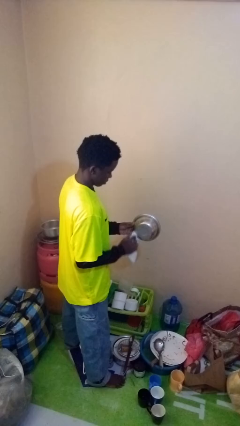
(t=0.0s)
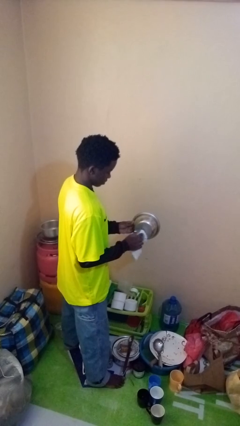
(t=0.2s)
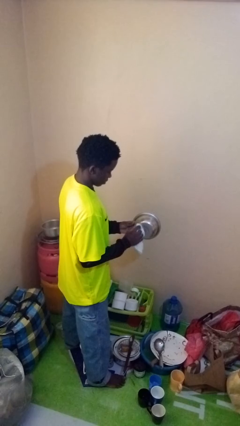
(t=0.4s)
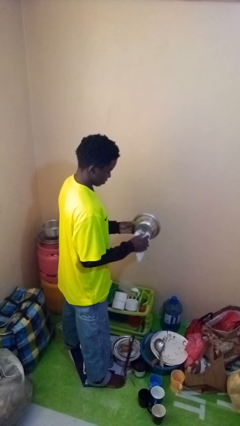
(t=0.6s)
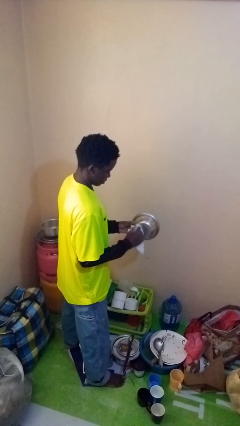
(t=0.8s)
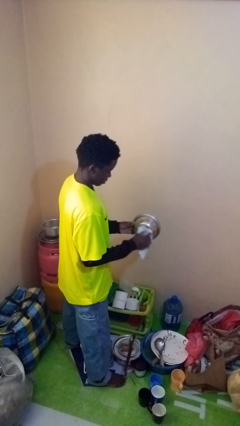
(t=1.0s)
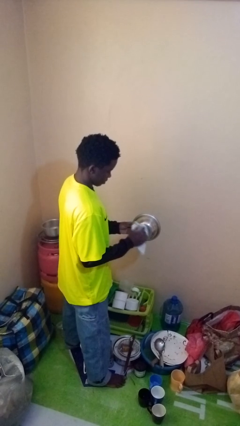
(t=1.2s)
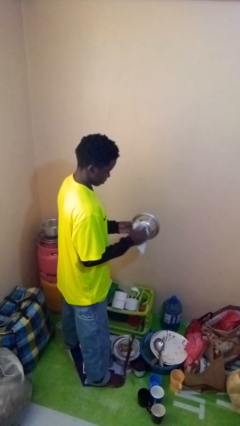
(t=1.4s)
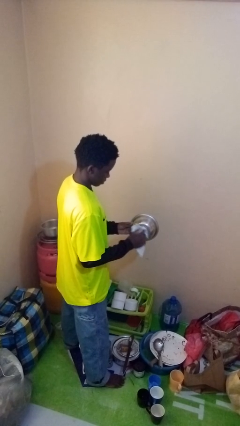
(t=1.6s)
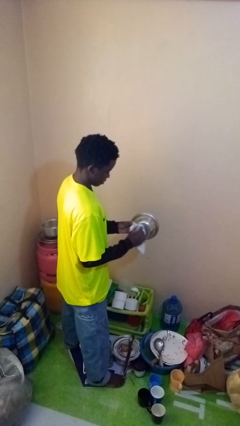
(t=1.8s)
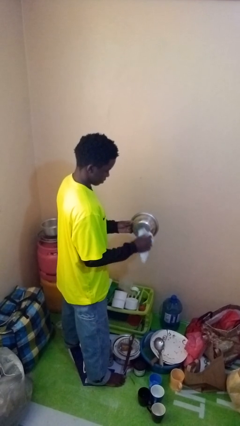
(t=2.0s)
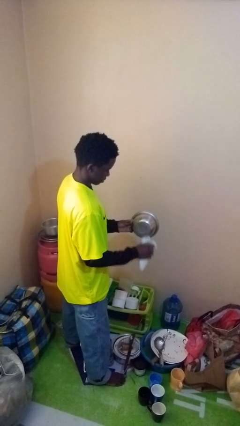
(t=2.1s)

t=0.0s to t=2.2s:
person dries dish

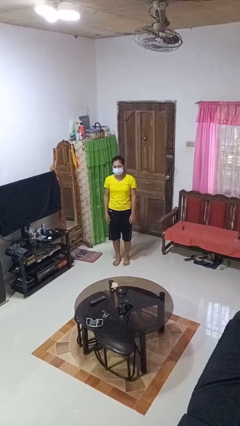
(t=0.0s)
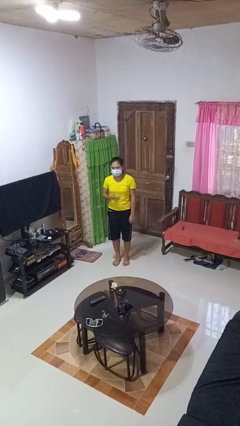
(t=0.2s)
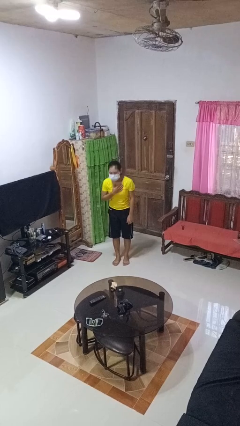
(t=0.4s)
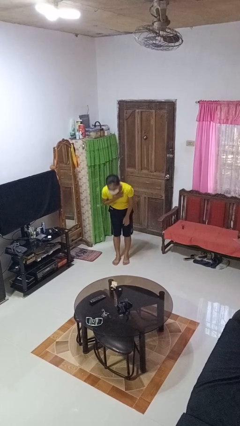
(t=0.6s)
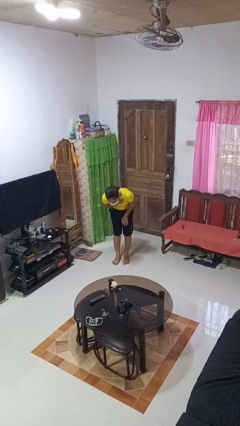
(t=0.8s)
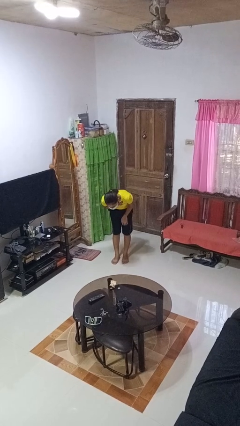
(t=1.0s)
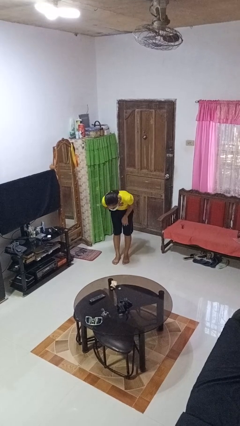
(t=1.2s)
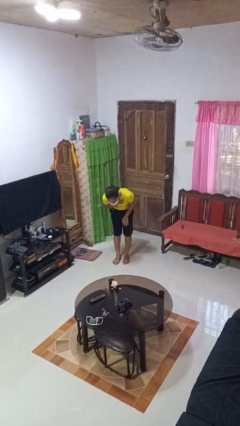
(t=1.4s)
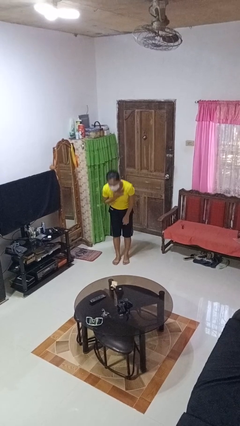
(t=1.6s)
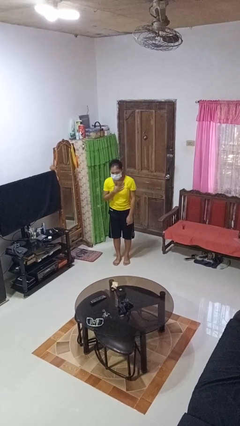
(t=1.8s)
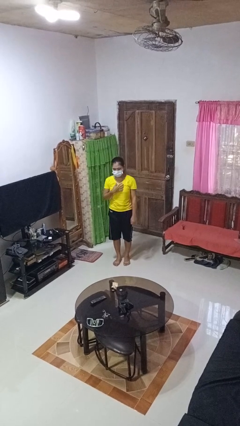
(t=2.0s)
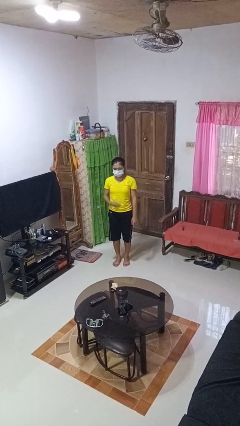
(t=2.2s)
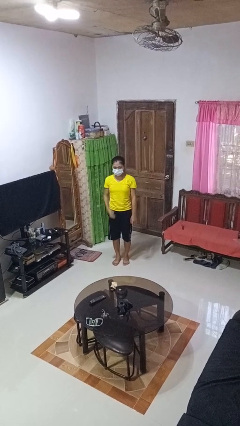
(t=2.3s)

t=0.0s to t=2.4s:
person bows

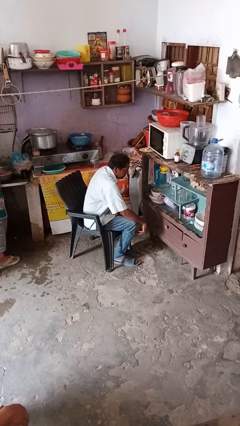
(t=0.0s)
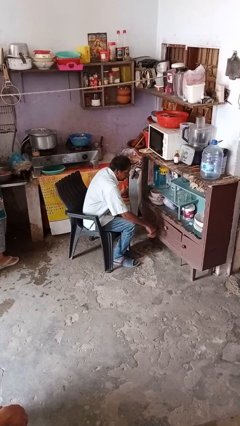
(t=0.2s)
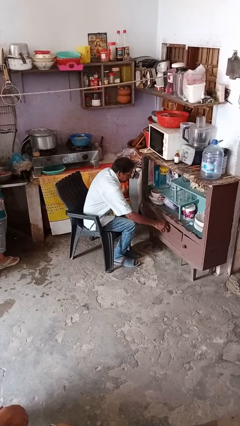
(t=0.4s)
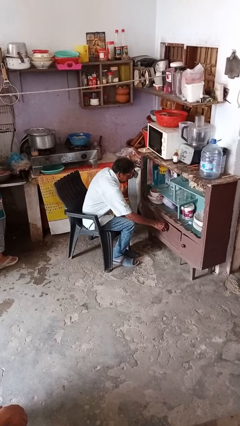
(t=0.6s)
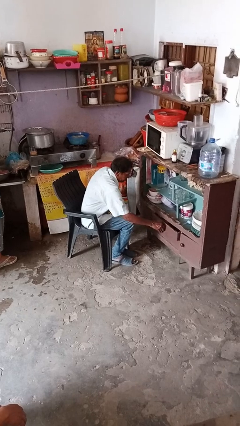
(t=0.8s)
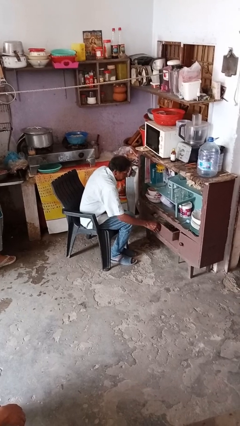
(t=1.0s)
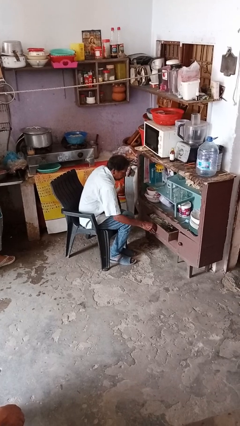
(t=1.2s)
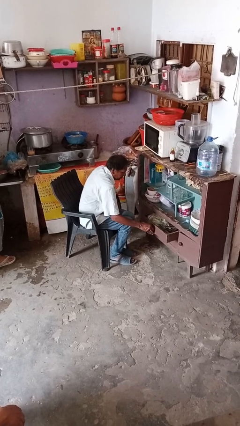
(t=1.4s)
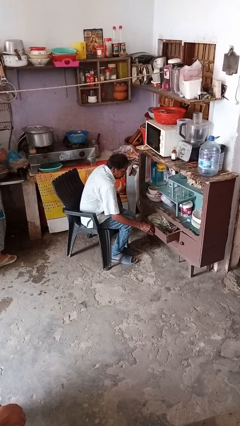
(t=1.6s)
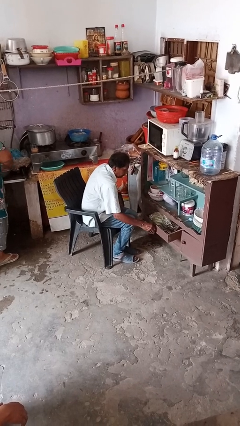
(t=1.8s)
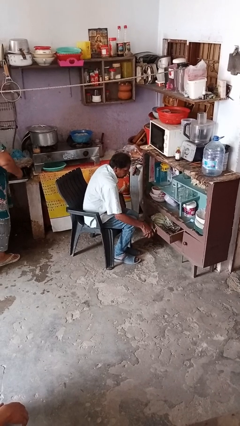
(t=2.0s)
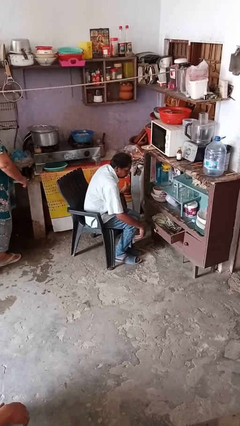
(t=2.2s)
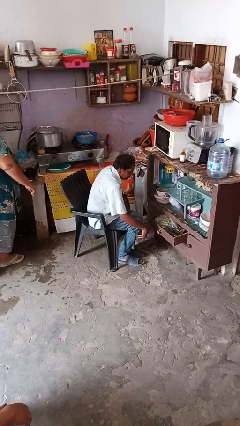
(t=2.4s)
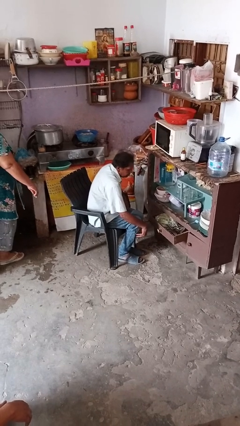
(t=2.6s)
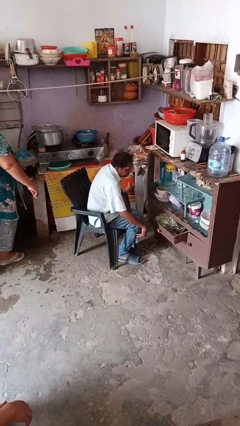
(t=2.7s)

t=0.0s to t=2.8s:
person opens dresser drawer

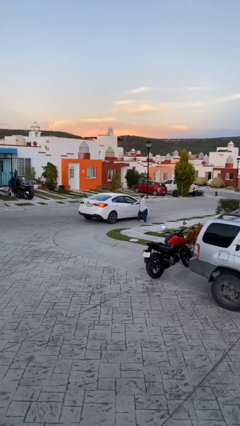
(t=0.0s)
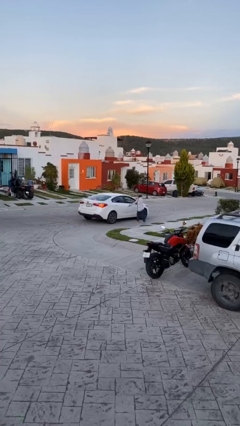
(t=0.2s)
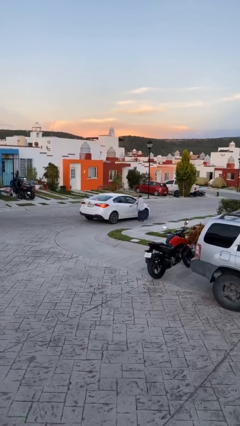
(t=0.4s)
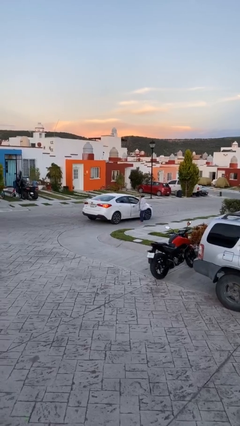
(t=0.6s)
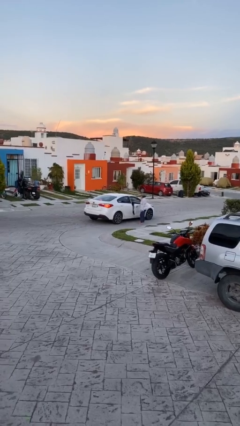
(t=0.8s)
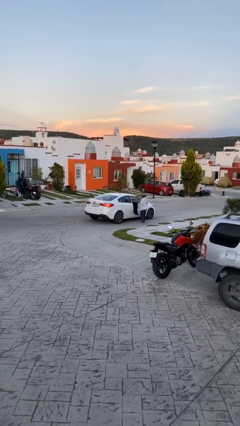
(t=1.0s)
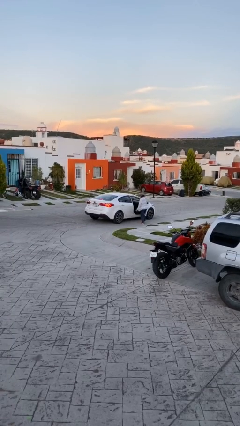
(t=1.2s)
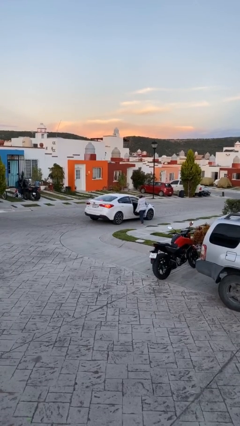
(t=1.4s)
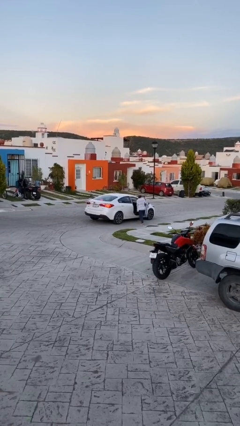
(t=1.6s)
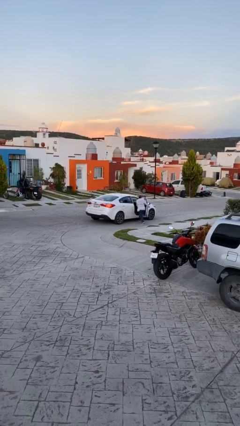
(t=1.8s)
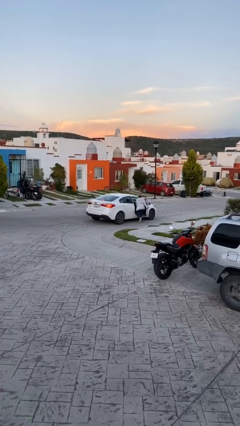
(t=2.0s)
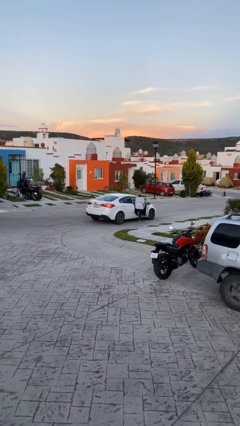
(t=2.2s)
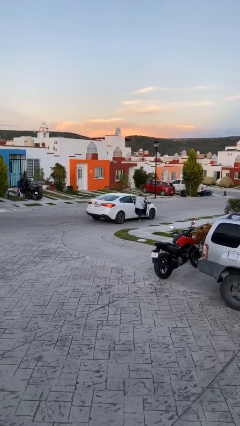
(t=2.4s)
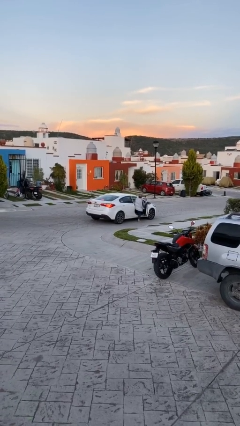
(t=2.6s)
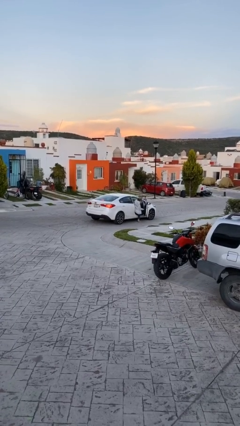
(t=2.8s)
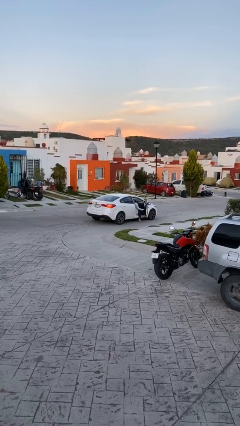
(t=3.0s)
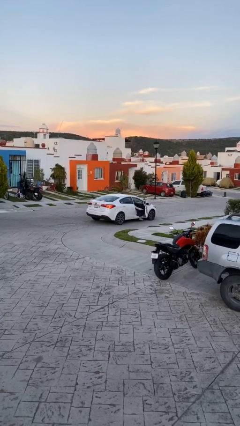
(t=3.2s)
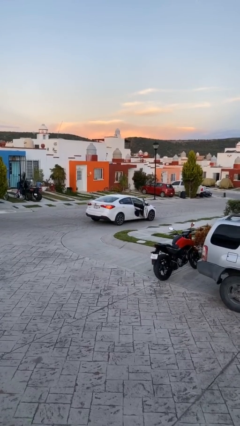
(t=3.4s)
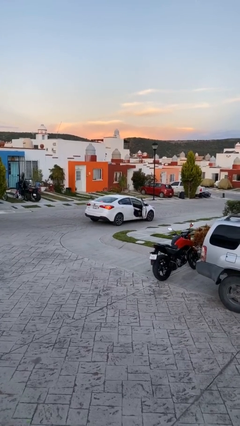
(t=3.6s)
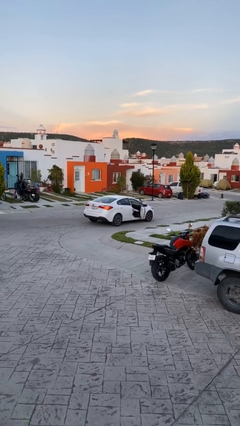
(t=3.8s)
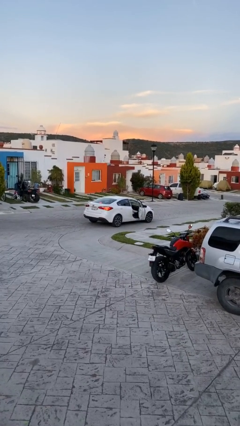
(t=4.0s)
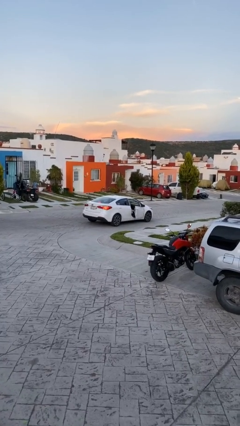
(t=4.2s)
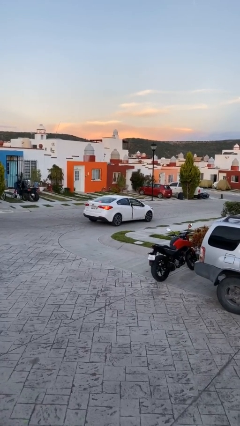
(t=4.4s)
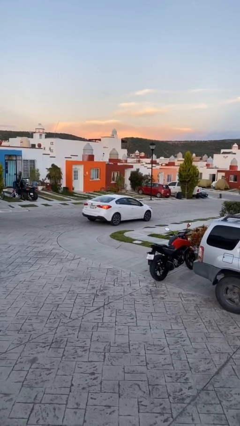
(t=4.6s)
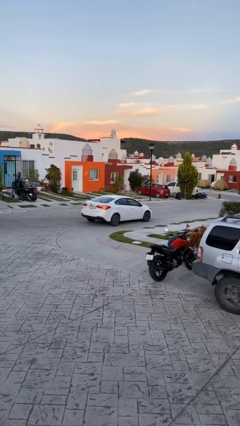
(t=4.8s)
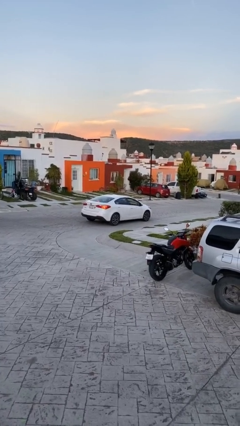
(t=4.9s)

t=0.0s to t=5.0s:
car picks up person

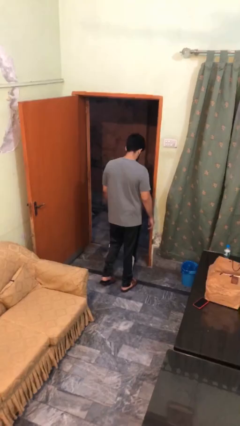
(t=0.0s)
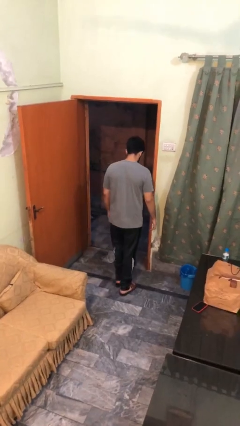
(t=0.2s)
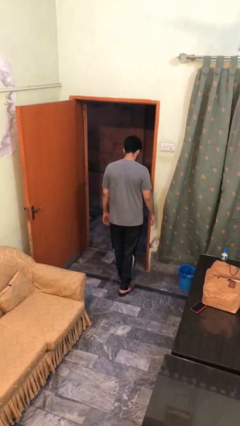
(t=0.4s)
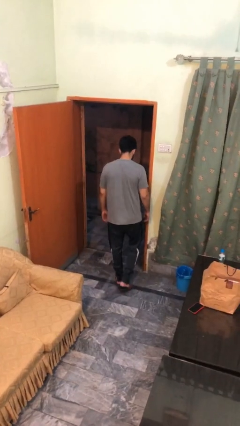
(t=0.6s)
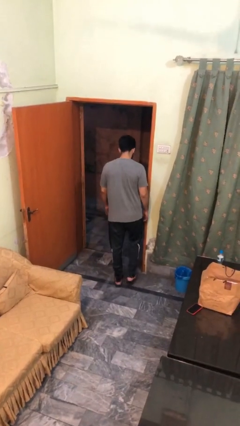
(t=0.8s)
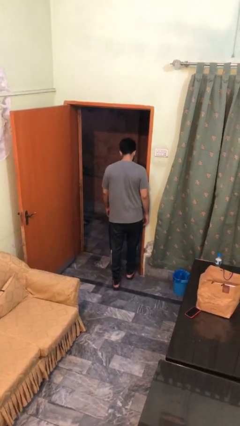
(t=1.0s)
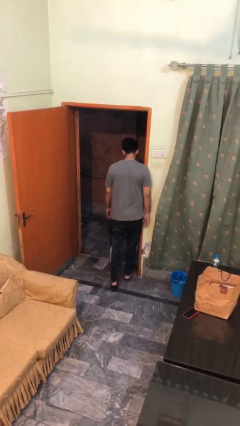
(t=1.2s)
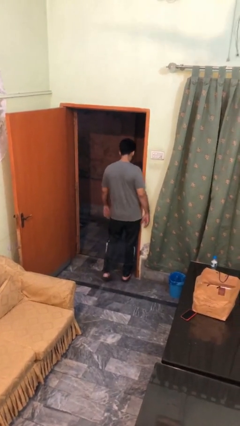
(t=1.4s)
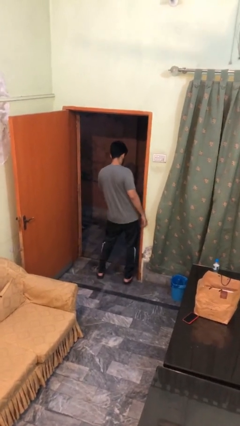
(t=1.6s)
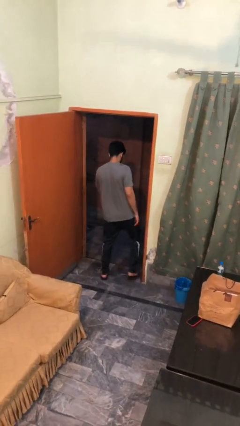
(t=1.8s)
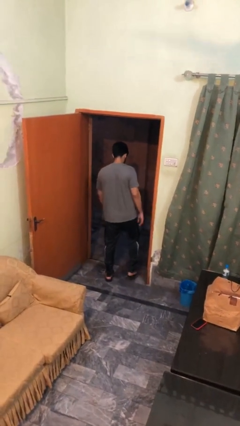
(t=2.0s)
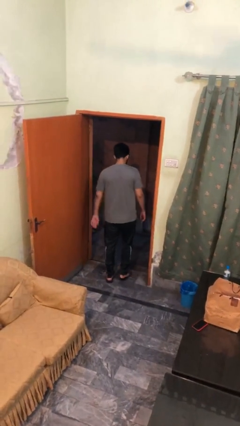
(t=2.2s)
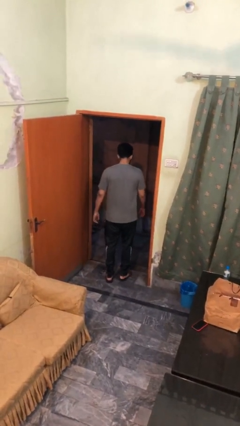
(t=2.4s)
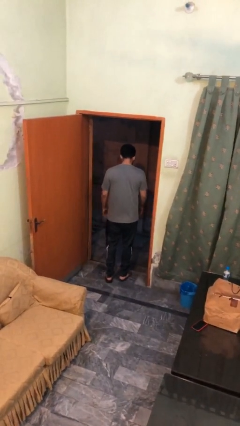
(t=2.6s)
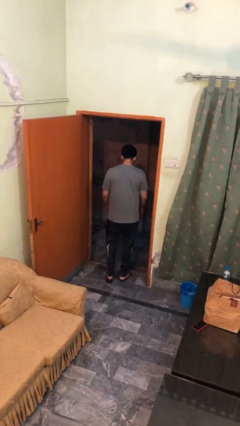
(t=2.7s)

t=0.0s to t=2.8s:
person bumps into wall

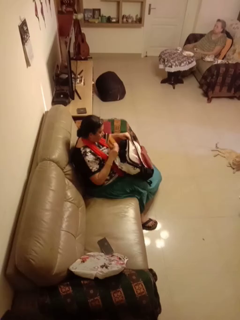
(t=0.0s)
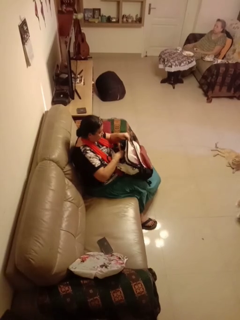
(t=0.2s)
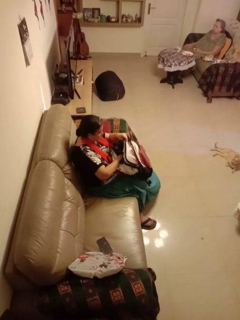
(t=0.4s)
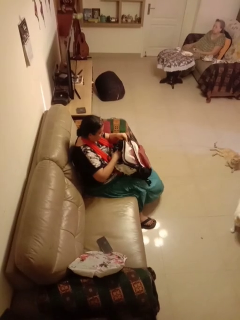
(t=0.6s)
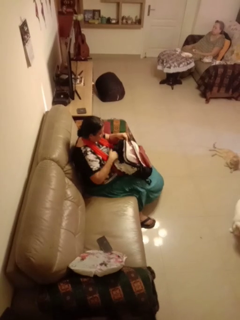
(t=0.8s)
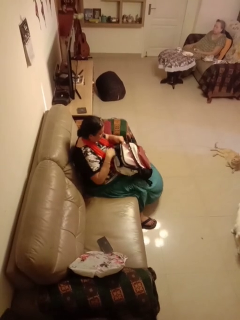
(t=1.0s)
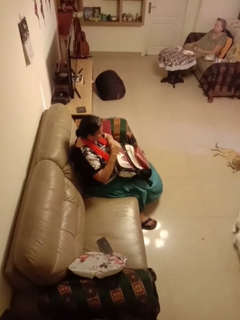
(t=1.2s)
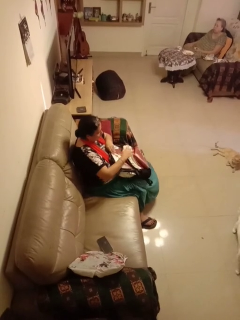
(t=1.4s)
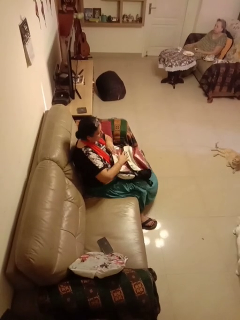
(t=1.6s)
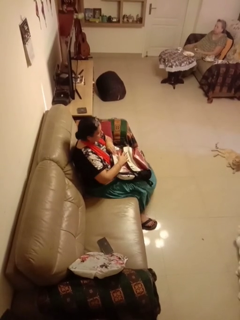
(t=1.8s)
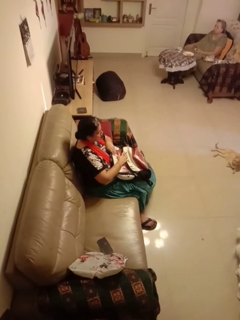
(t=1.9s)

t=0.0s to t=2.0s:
person puts object into backpack

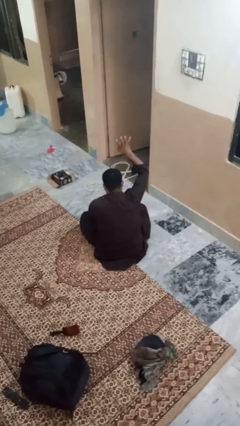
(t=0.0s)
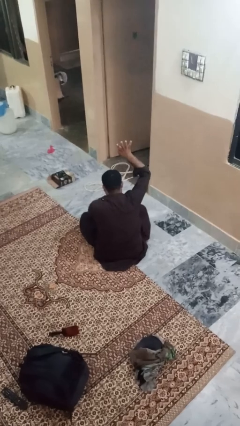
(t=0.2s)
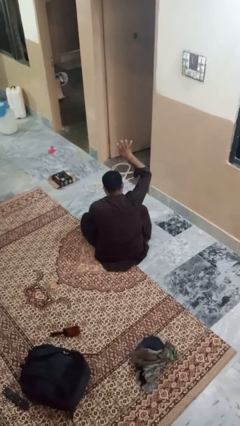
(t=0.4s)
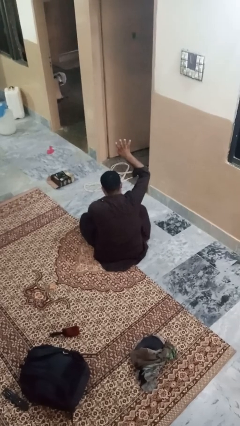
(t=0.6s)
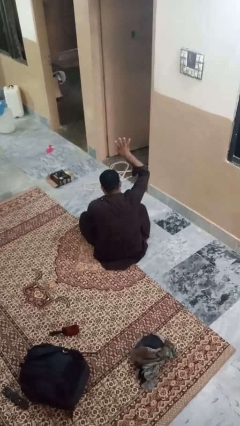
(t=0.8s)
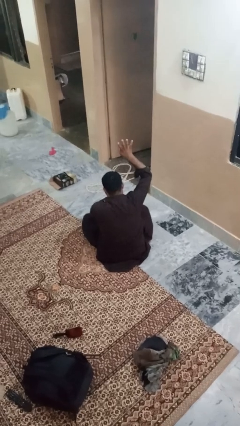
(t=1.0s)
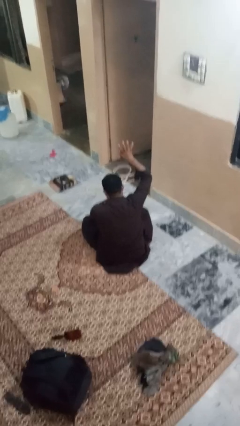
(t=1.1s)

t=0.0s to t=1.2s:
person gestures number four
